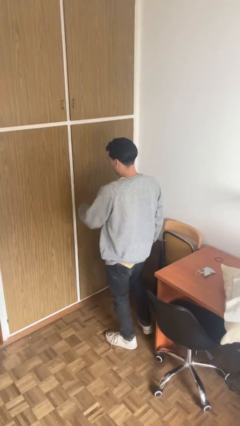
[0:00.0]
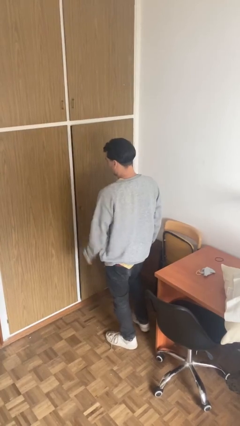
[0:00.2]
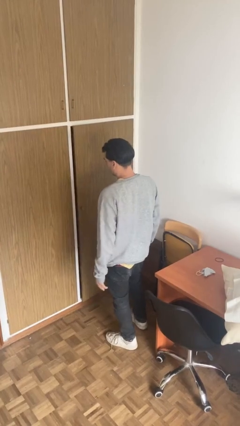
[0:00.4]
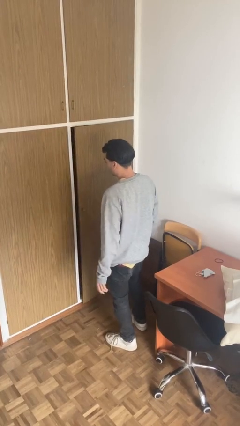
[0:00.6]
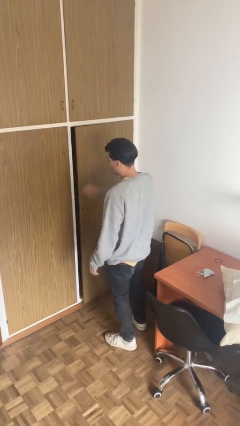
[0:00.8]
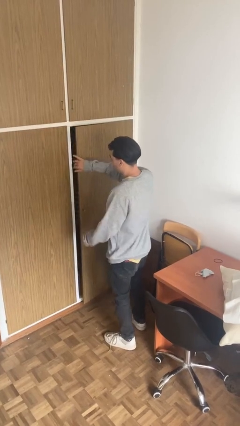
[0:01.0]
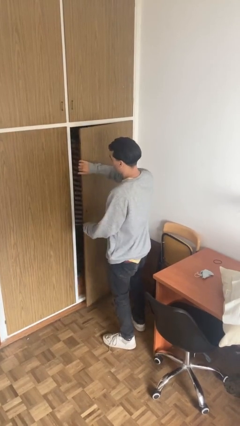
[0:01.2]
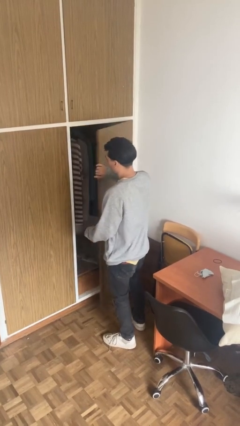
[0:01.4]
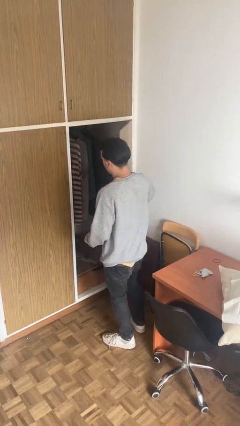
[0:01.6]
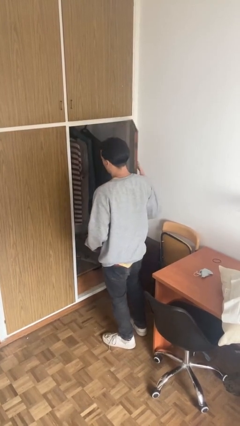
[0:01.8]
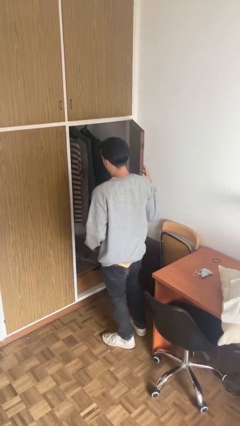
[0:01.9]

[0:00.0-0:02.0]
person opens closet door

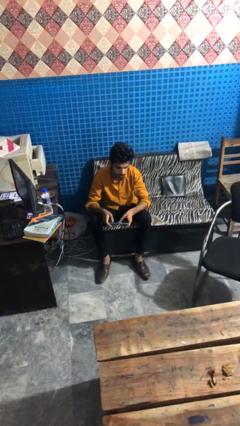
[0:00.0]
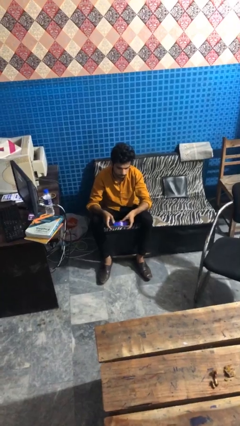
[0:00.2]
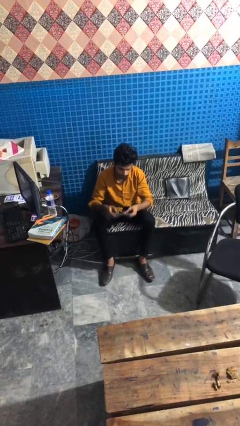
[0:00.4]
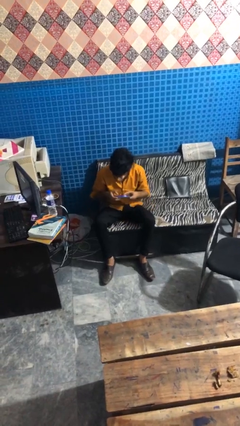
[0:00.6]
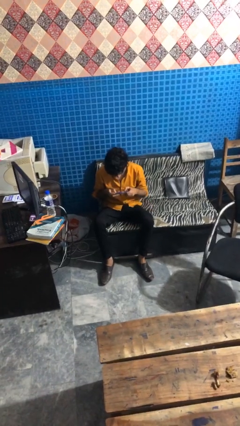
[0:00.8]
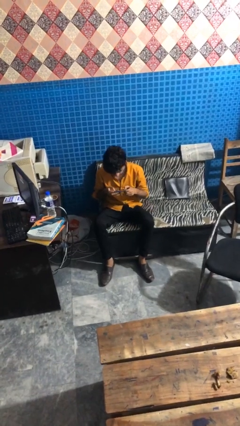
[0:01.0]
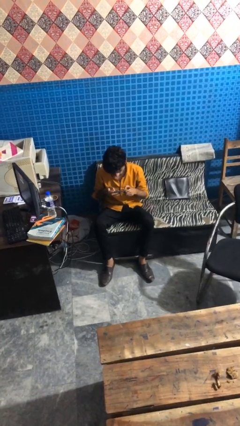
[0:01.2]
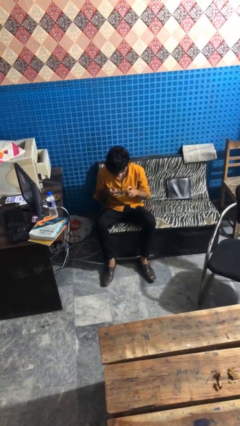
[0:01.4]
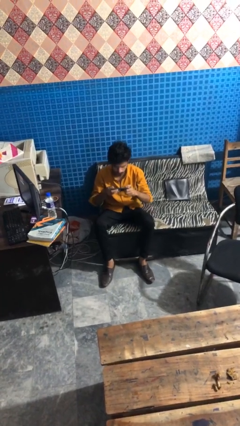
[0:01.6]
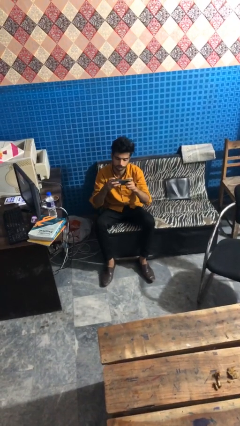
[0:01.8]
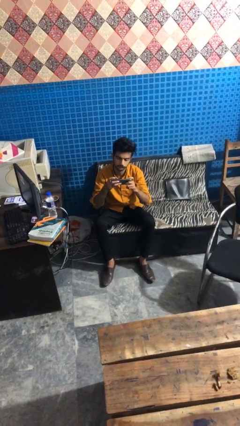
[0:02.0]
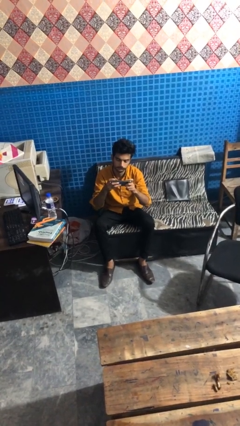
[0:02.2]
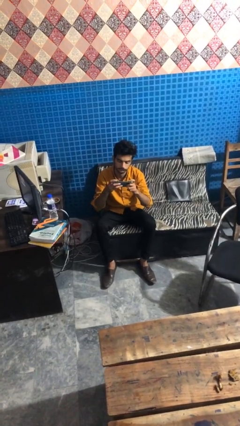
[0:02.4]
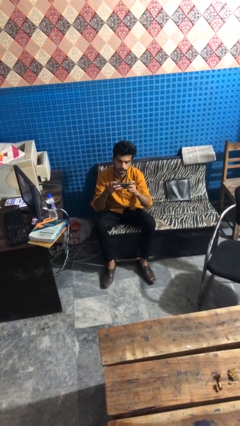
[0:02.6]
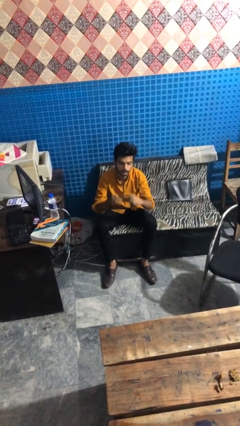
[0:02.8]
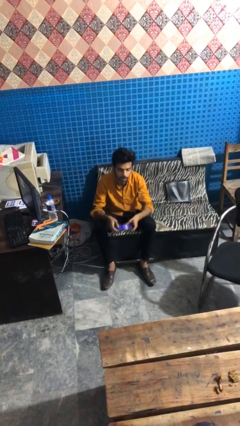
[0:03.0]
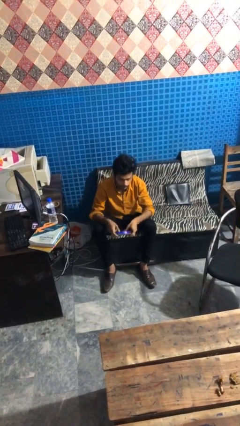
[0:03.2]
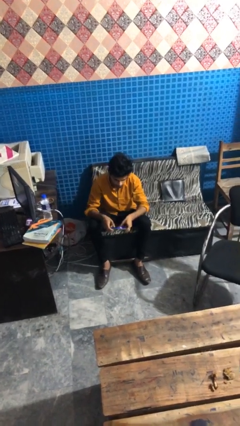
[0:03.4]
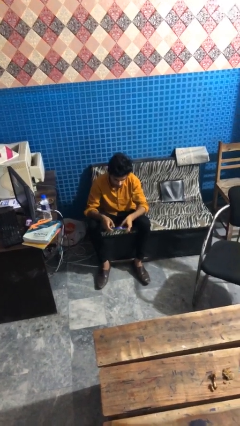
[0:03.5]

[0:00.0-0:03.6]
person interacts with handheld game

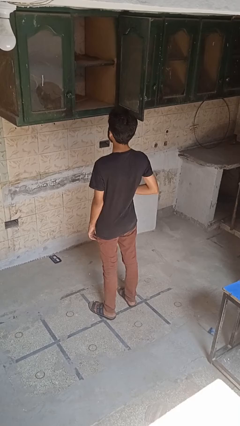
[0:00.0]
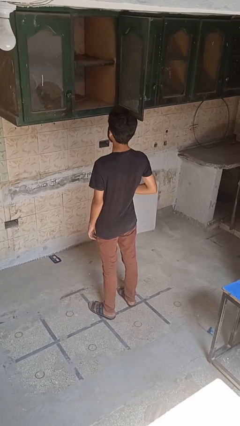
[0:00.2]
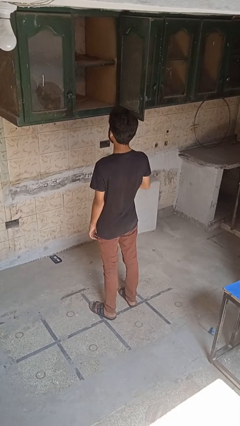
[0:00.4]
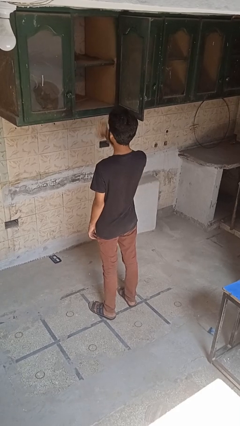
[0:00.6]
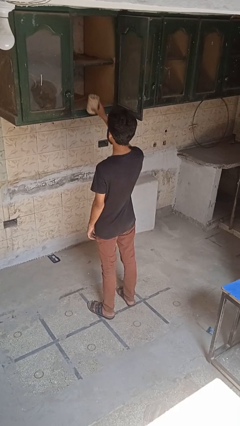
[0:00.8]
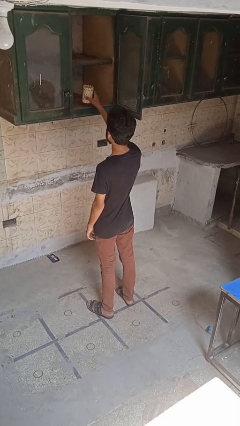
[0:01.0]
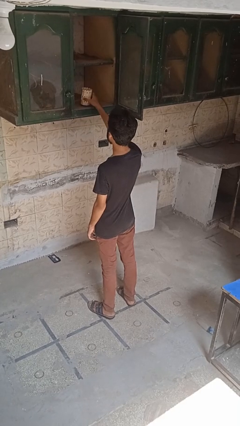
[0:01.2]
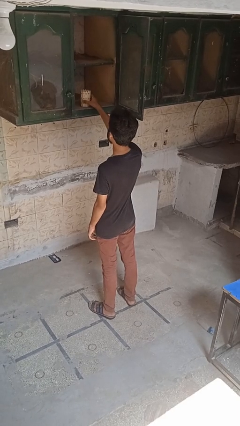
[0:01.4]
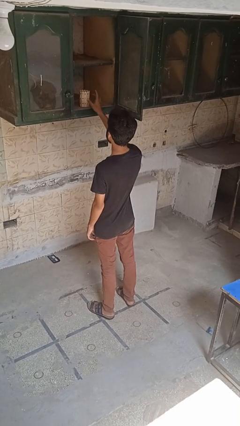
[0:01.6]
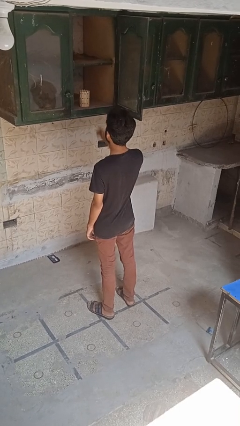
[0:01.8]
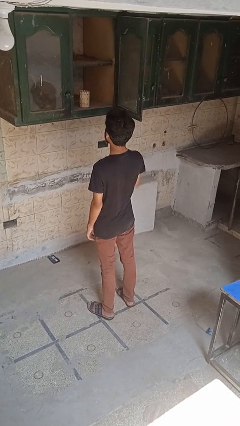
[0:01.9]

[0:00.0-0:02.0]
person puts down object into cabinet

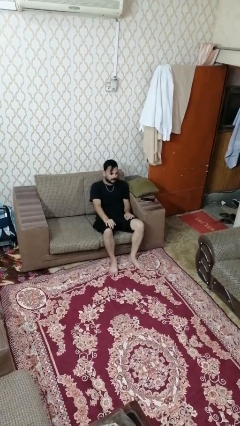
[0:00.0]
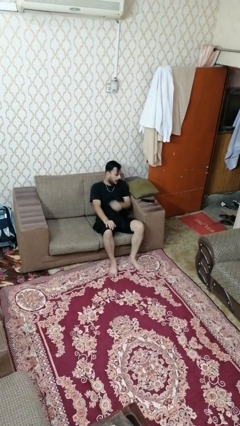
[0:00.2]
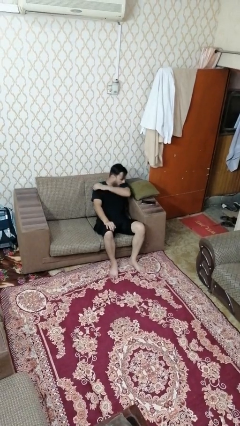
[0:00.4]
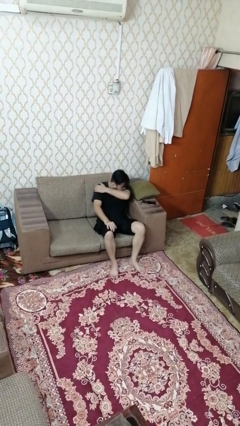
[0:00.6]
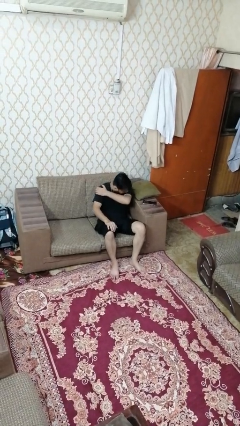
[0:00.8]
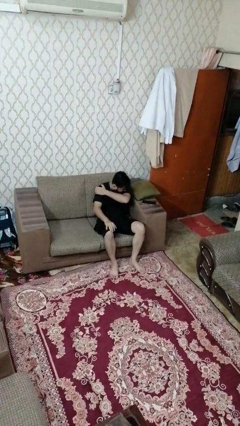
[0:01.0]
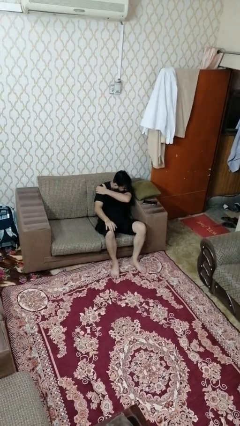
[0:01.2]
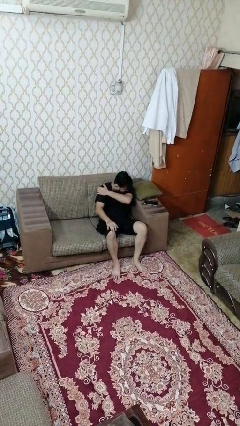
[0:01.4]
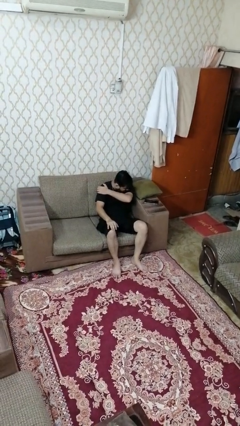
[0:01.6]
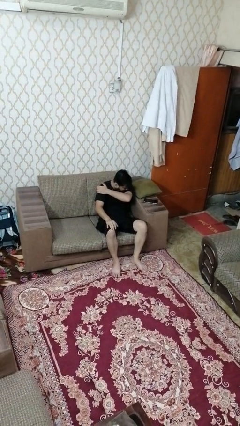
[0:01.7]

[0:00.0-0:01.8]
person sneezes into arm

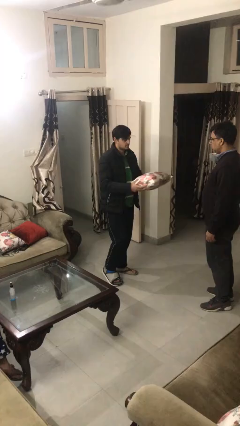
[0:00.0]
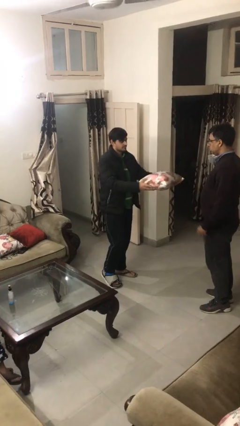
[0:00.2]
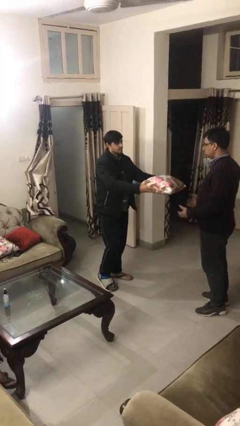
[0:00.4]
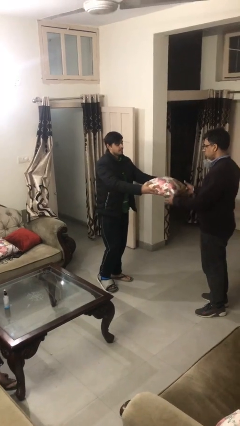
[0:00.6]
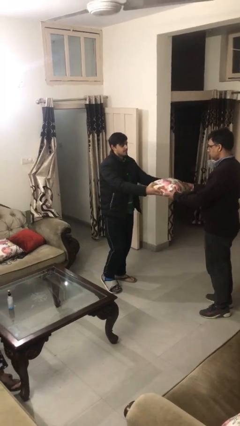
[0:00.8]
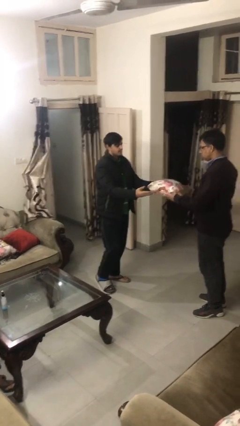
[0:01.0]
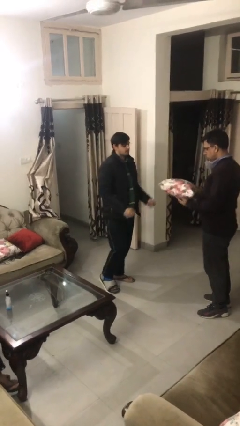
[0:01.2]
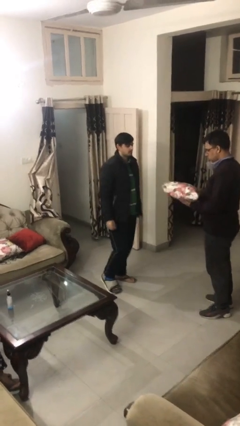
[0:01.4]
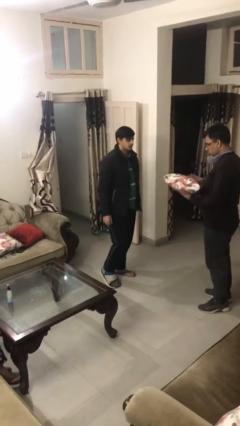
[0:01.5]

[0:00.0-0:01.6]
person transfers object to person

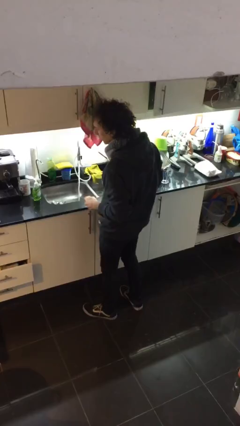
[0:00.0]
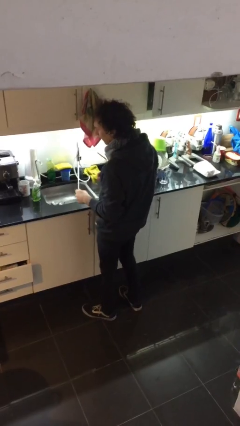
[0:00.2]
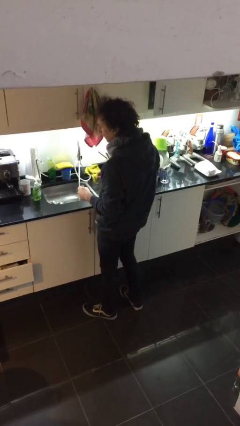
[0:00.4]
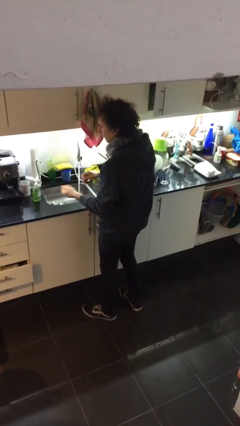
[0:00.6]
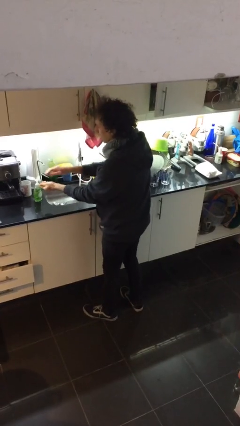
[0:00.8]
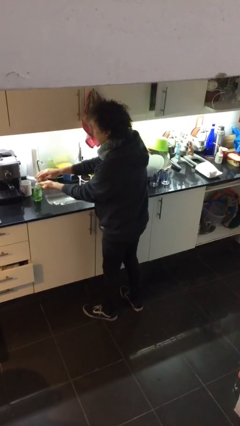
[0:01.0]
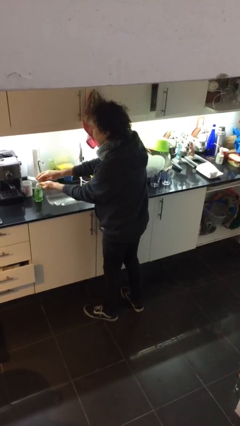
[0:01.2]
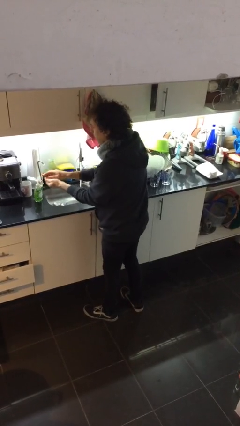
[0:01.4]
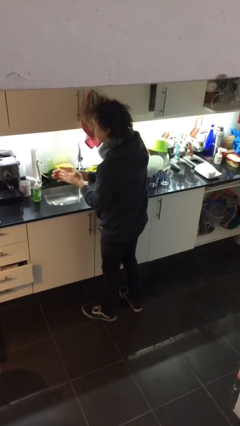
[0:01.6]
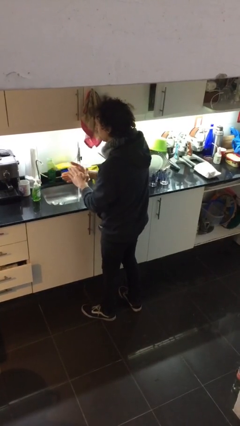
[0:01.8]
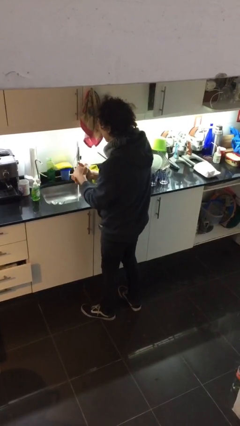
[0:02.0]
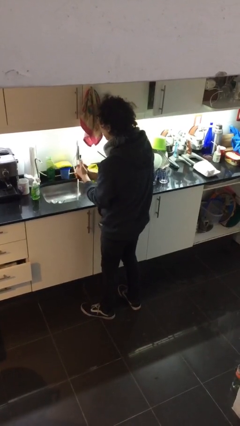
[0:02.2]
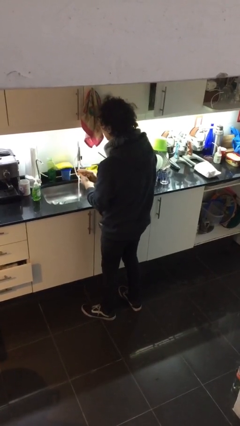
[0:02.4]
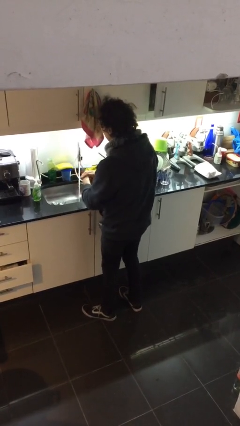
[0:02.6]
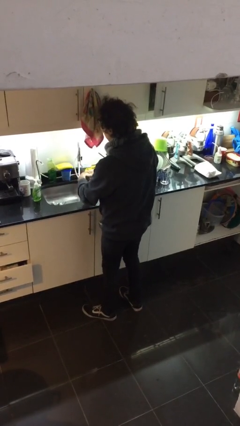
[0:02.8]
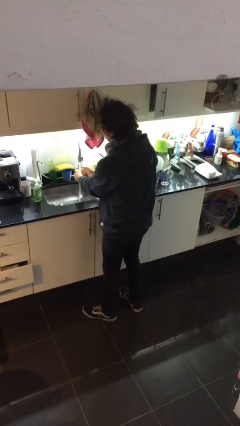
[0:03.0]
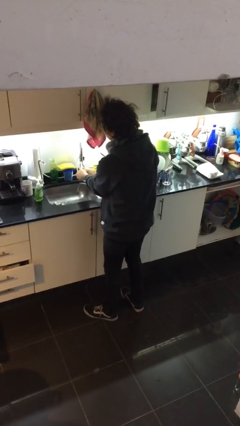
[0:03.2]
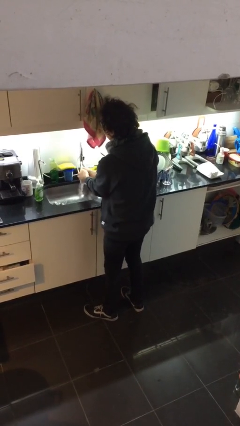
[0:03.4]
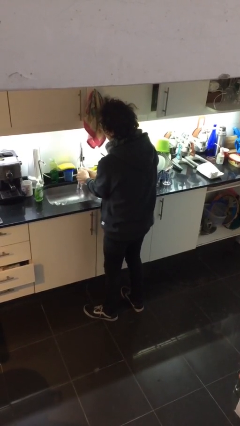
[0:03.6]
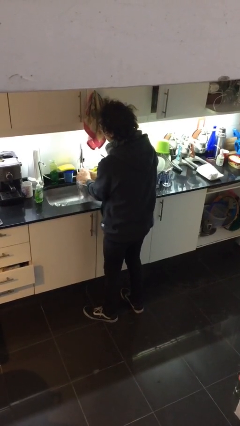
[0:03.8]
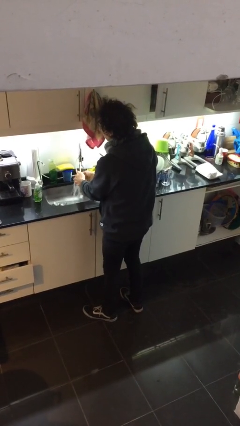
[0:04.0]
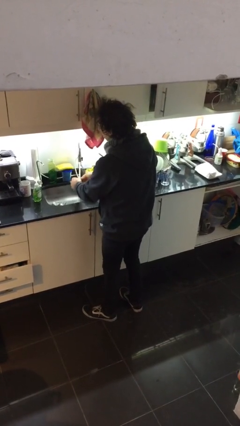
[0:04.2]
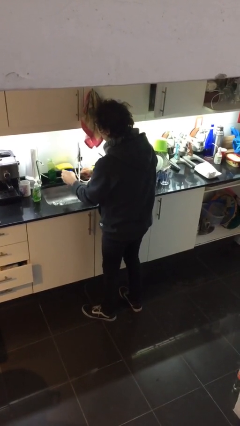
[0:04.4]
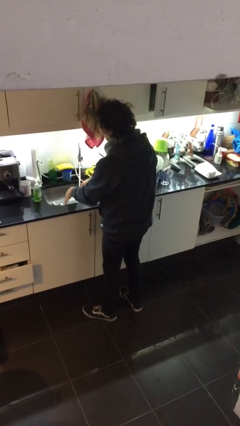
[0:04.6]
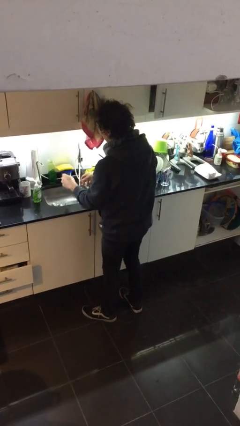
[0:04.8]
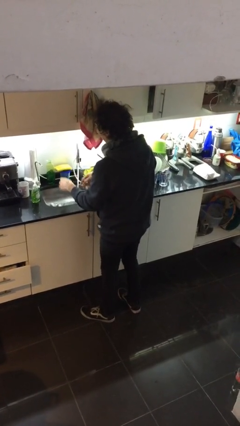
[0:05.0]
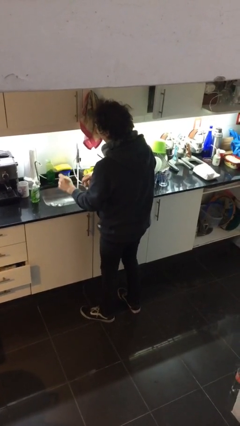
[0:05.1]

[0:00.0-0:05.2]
person washes hands

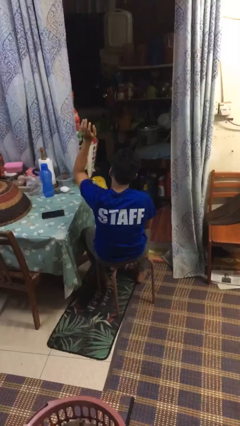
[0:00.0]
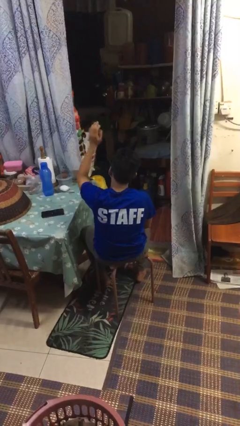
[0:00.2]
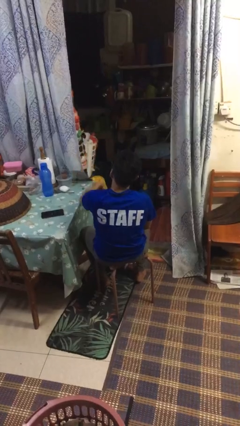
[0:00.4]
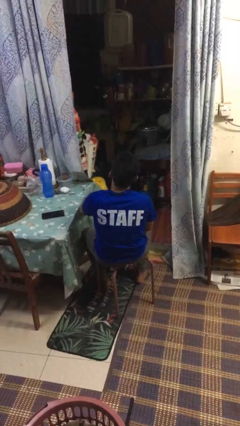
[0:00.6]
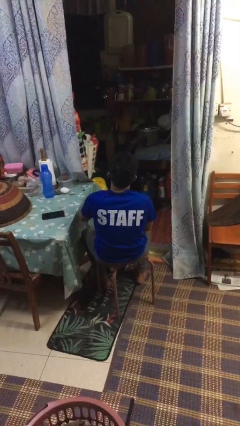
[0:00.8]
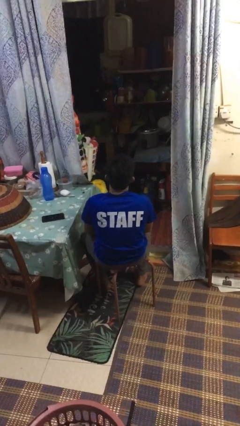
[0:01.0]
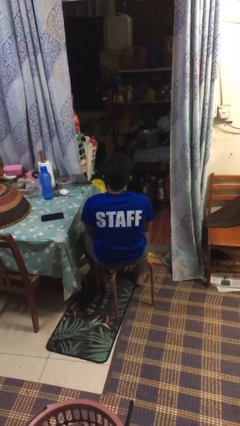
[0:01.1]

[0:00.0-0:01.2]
person gestures swipe down
